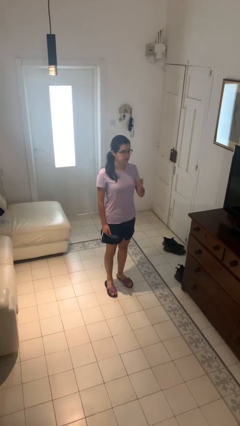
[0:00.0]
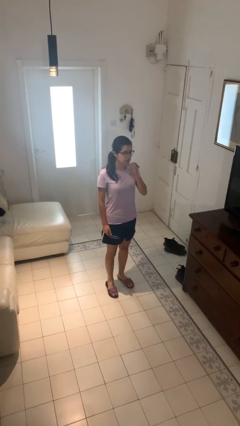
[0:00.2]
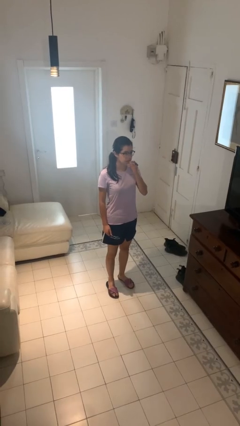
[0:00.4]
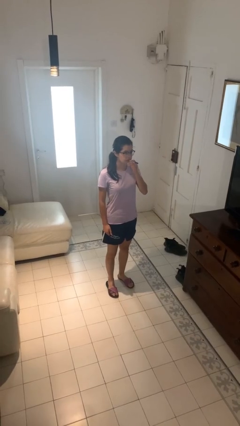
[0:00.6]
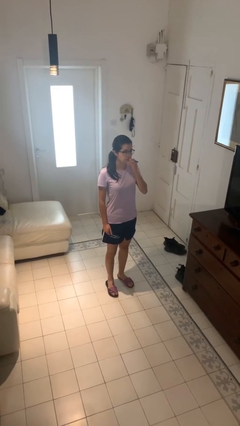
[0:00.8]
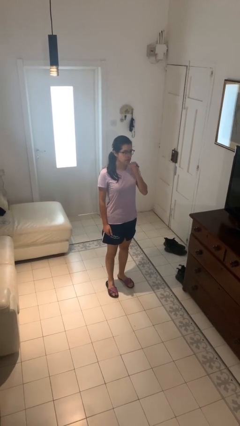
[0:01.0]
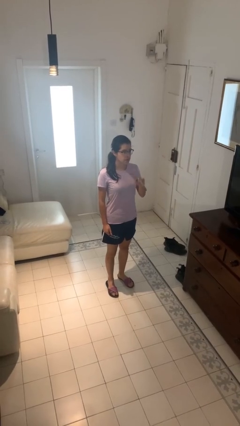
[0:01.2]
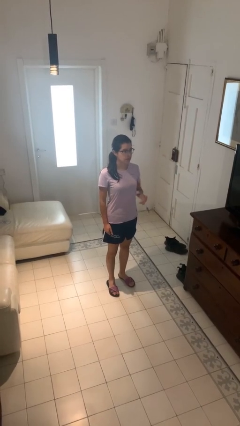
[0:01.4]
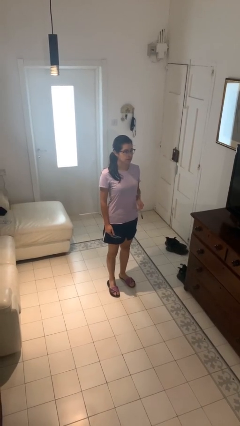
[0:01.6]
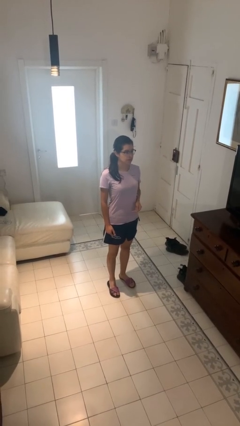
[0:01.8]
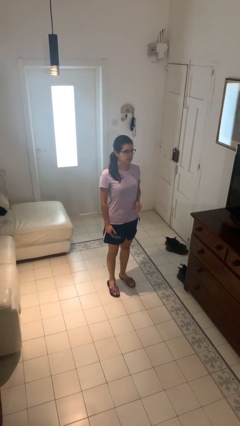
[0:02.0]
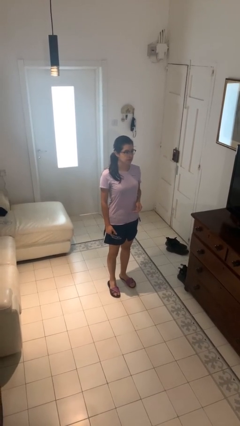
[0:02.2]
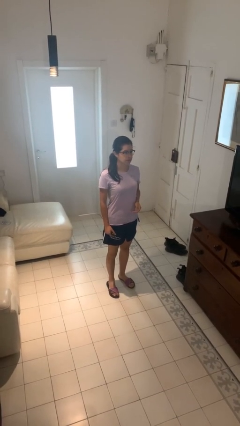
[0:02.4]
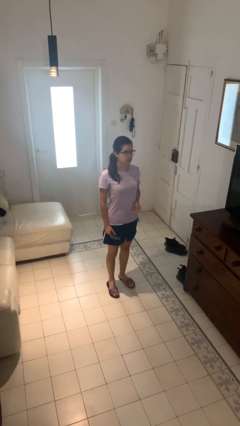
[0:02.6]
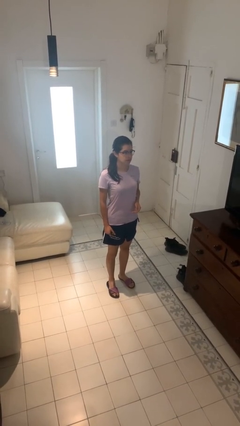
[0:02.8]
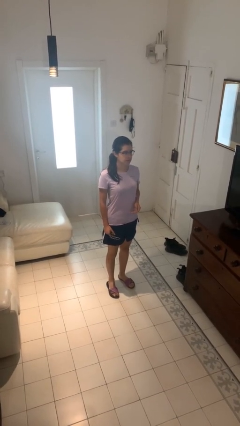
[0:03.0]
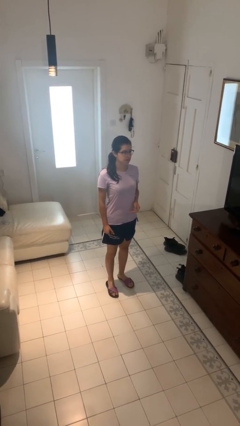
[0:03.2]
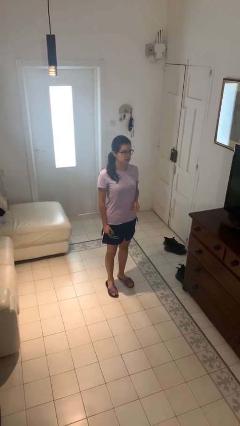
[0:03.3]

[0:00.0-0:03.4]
person vapes

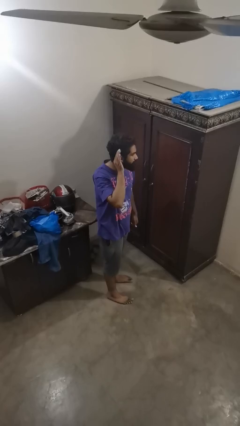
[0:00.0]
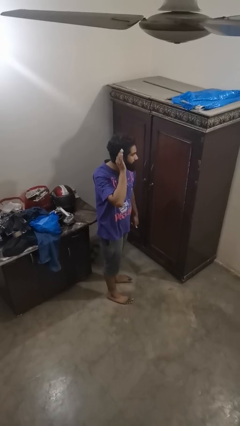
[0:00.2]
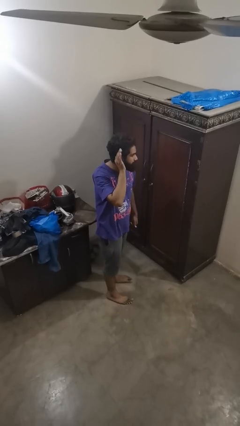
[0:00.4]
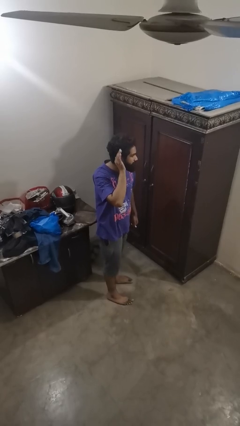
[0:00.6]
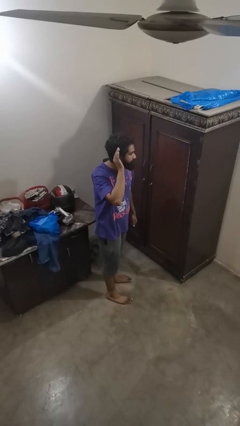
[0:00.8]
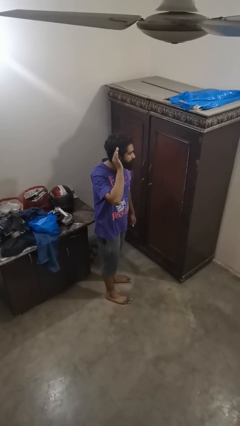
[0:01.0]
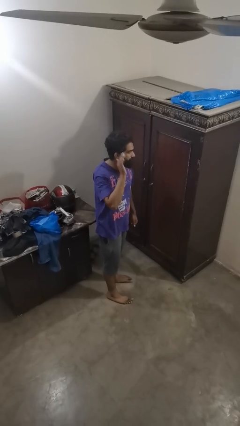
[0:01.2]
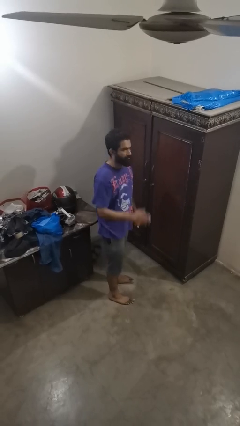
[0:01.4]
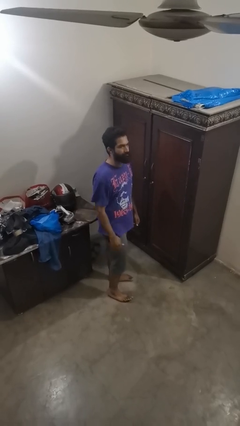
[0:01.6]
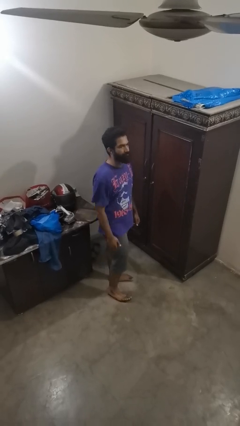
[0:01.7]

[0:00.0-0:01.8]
person gestures listen closely

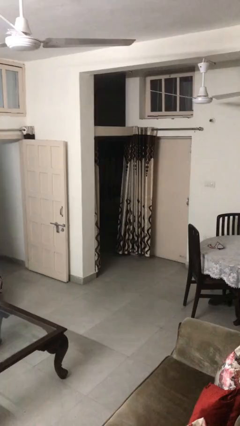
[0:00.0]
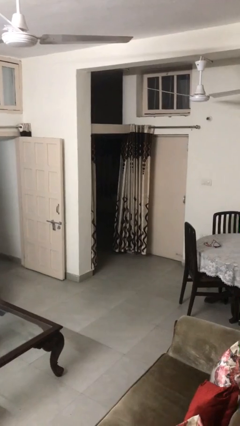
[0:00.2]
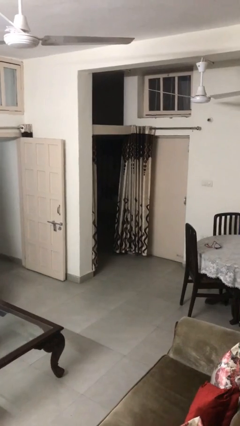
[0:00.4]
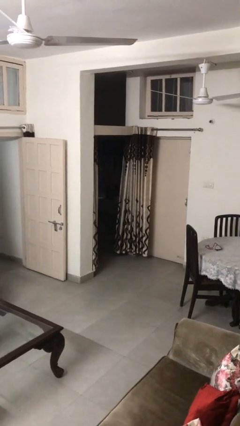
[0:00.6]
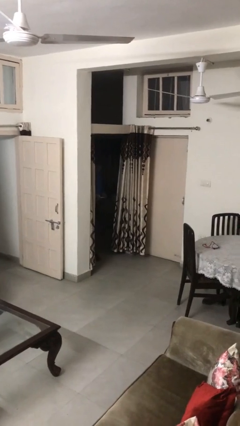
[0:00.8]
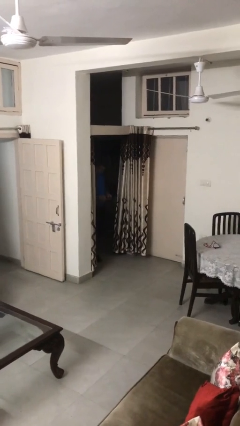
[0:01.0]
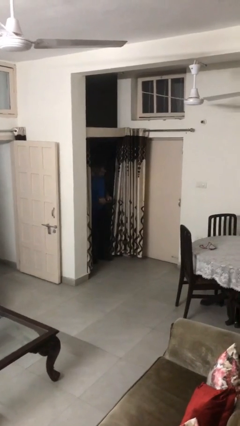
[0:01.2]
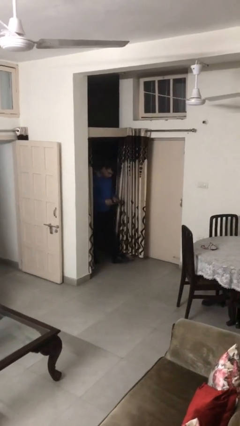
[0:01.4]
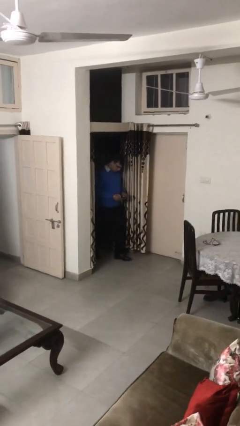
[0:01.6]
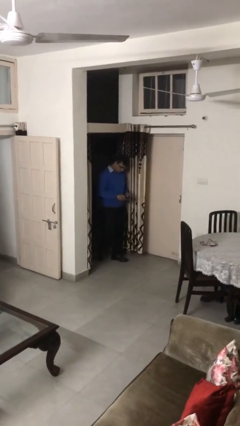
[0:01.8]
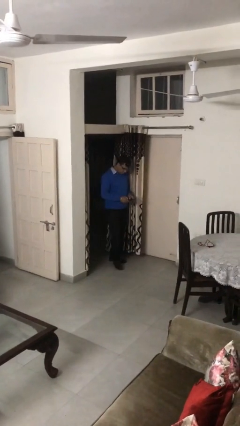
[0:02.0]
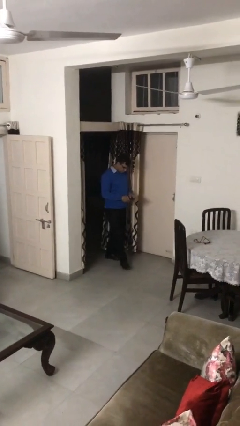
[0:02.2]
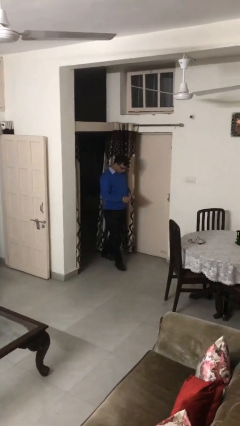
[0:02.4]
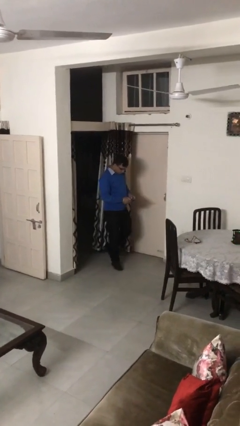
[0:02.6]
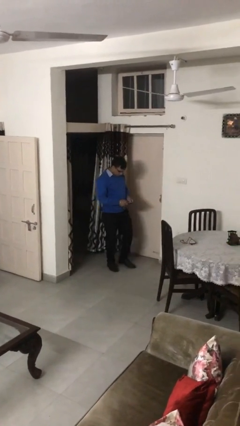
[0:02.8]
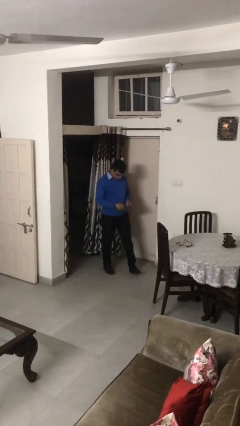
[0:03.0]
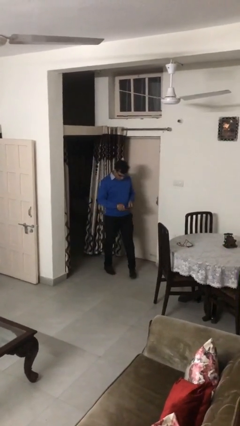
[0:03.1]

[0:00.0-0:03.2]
person enters scene through structure

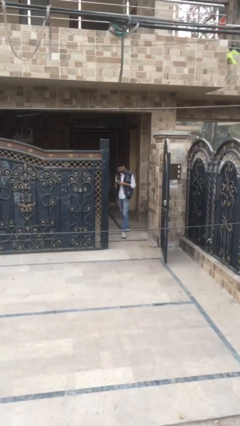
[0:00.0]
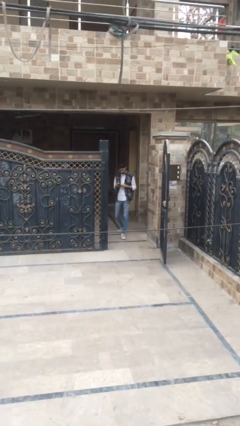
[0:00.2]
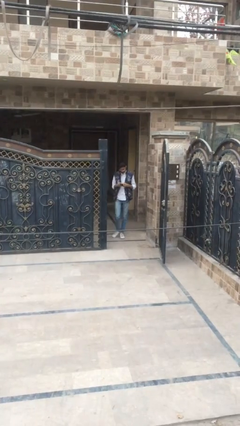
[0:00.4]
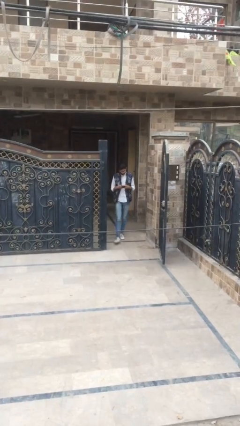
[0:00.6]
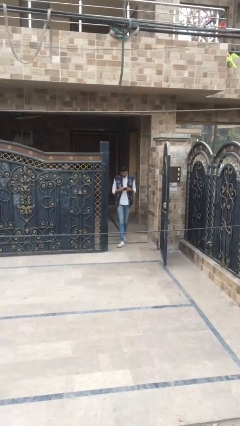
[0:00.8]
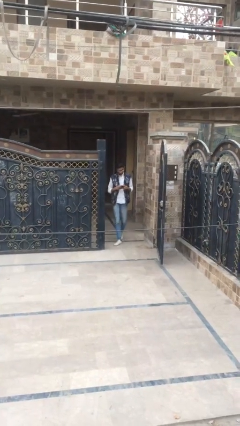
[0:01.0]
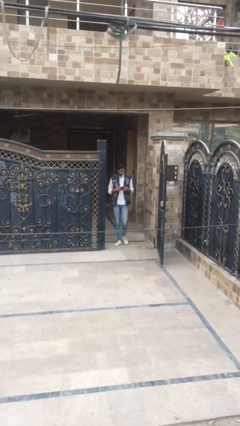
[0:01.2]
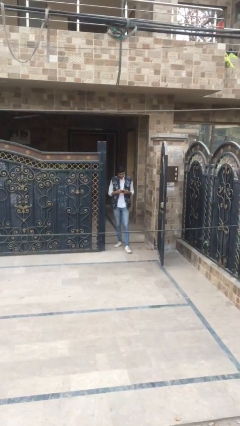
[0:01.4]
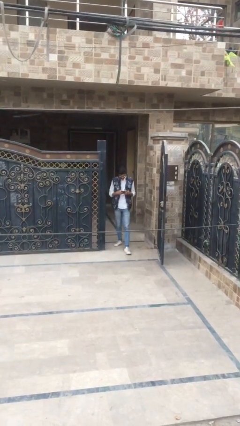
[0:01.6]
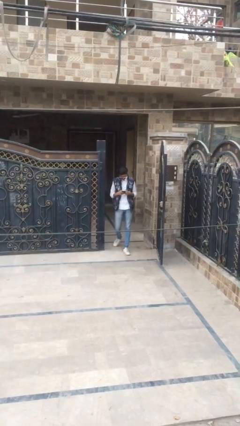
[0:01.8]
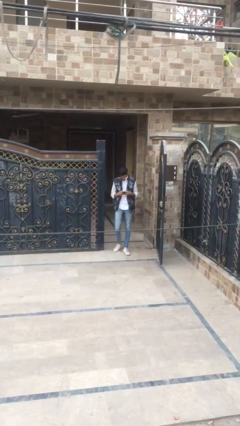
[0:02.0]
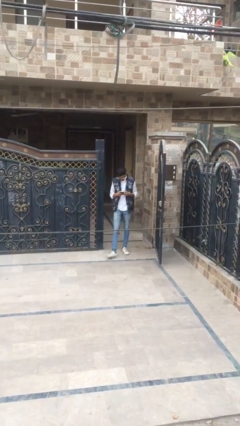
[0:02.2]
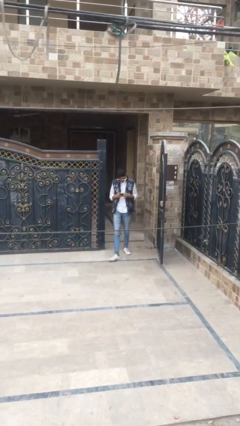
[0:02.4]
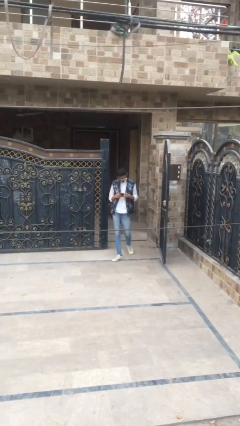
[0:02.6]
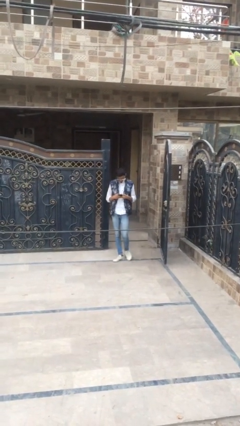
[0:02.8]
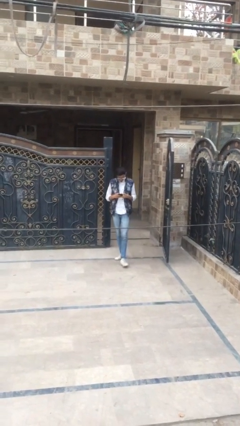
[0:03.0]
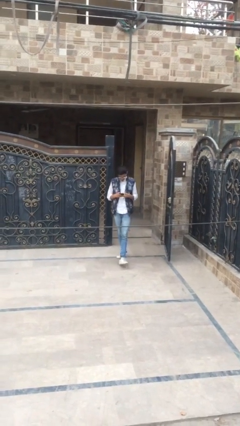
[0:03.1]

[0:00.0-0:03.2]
person exits scene through structure

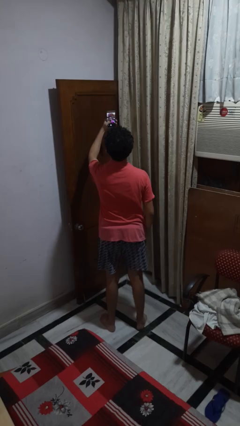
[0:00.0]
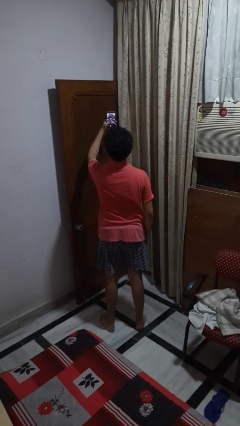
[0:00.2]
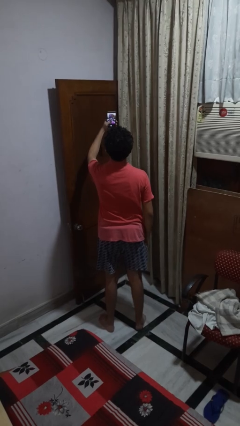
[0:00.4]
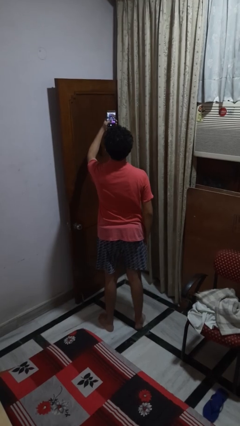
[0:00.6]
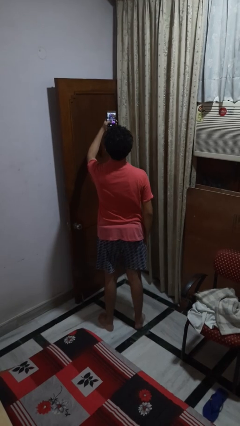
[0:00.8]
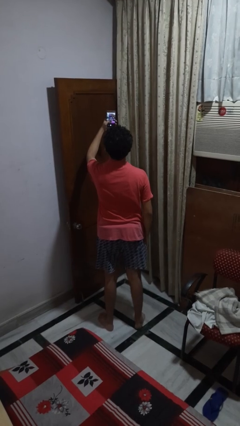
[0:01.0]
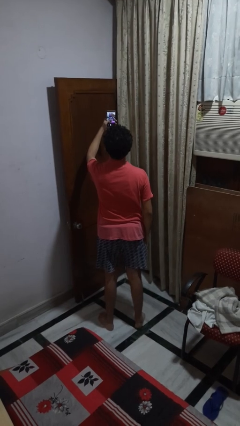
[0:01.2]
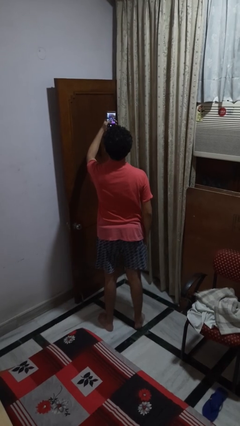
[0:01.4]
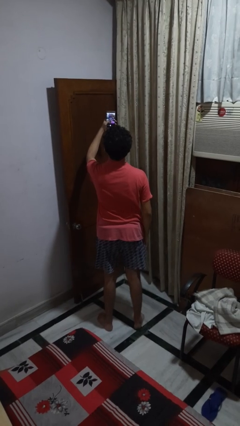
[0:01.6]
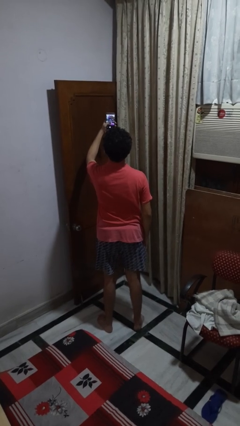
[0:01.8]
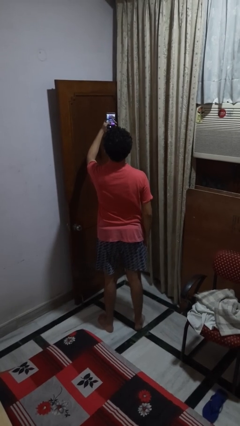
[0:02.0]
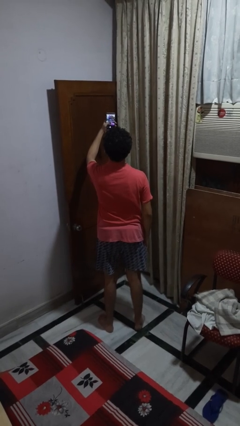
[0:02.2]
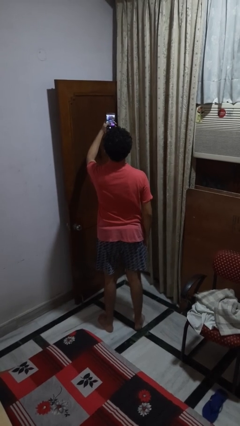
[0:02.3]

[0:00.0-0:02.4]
person takes selfie

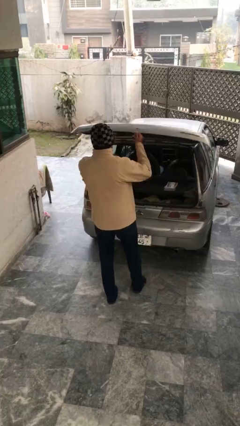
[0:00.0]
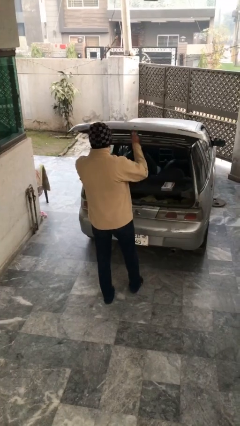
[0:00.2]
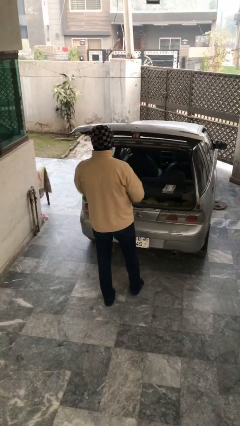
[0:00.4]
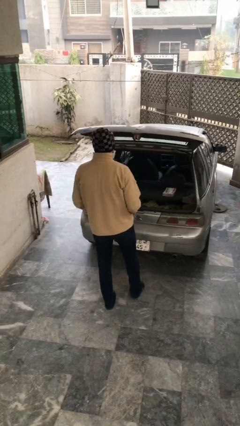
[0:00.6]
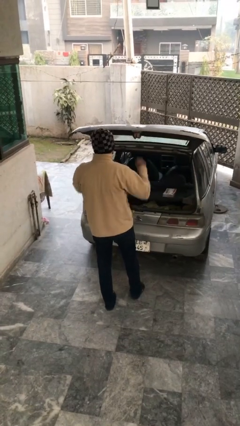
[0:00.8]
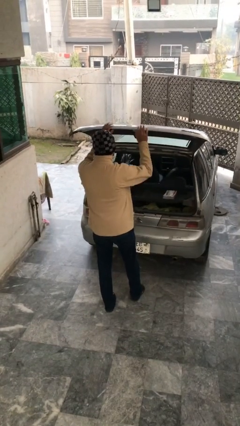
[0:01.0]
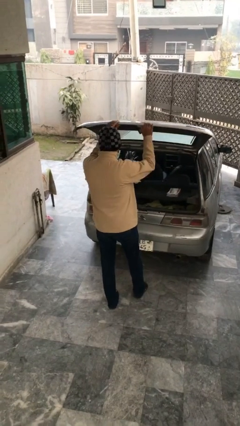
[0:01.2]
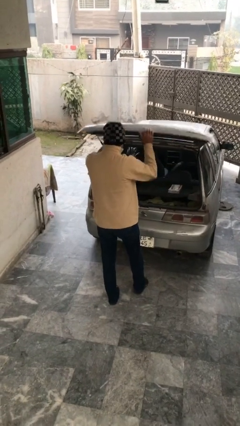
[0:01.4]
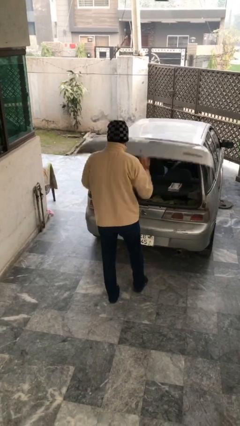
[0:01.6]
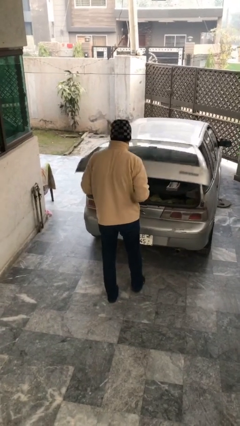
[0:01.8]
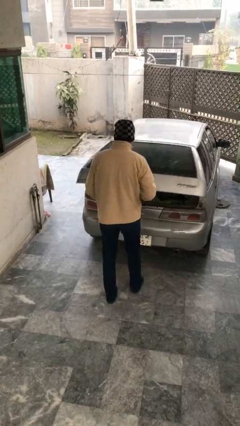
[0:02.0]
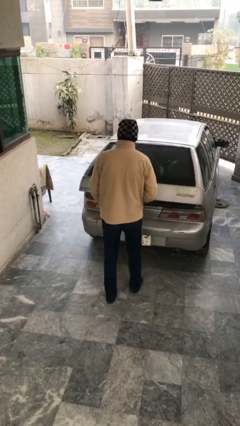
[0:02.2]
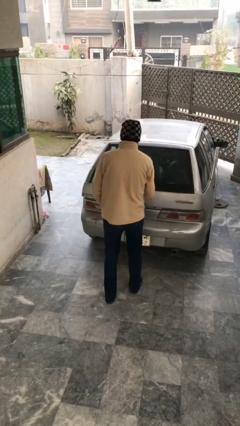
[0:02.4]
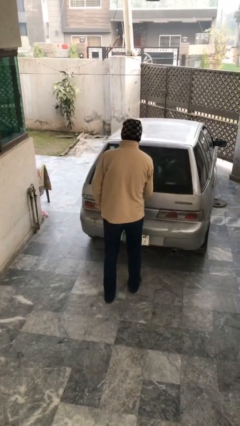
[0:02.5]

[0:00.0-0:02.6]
person closes car trunk

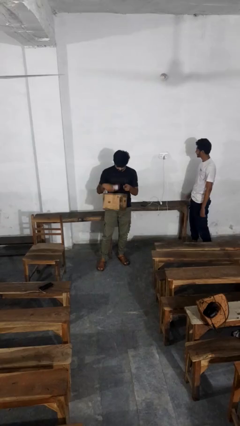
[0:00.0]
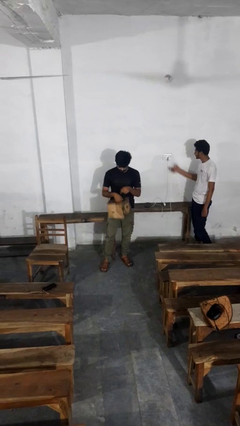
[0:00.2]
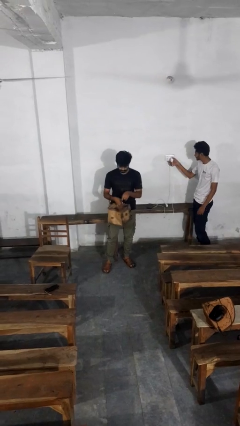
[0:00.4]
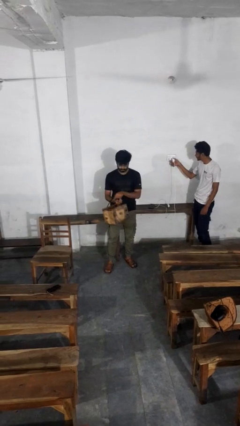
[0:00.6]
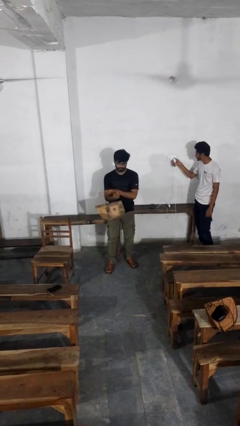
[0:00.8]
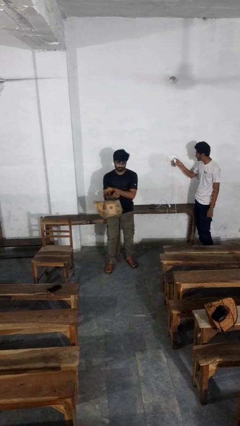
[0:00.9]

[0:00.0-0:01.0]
person puts object into purse
